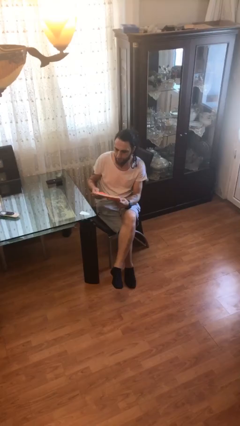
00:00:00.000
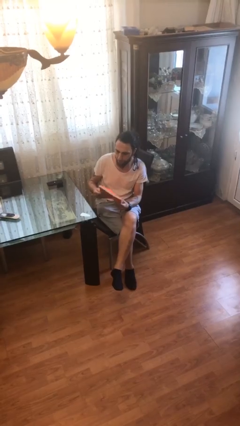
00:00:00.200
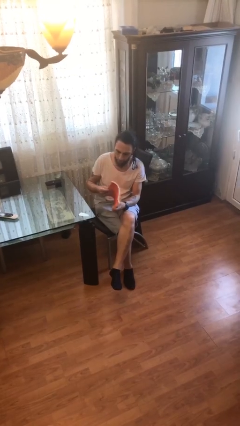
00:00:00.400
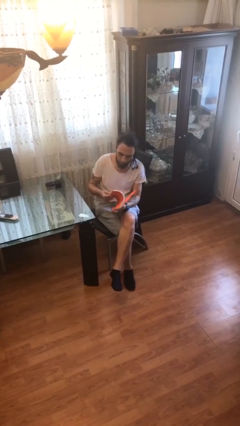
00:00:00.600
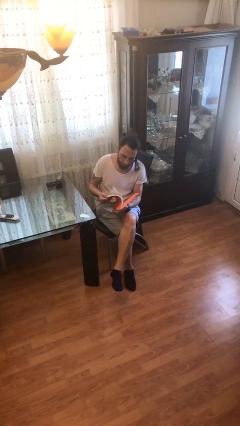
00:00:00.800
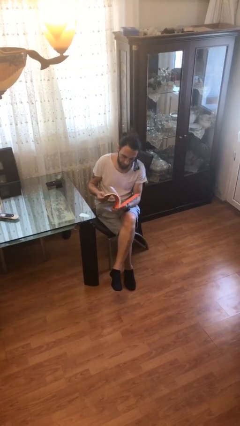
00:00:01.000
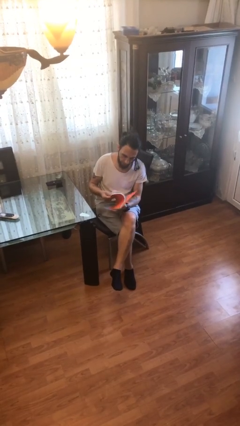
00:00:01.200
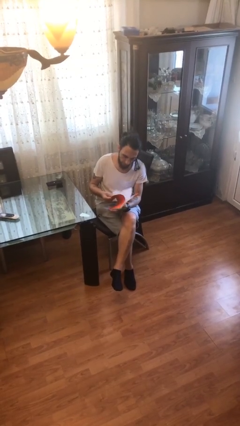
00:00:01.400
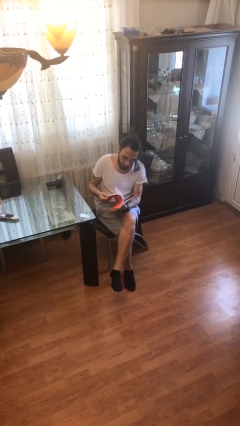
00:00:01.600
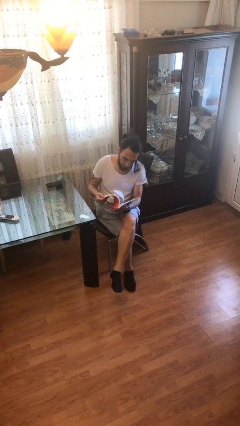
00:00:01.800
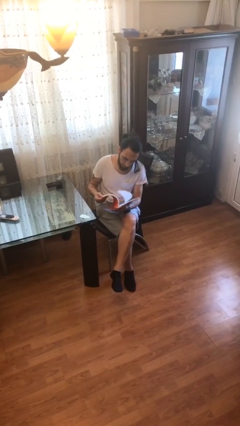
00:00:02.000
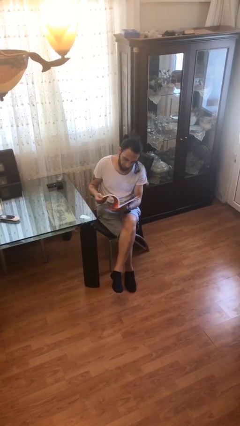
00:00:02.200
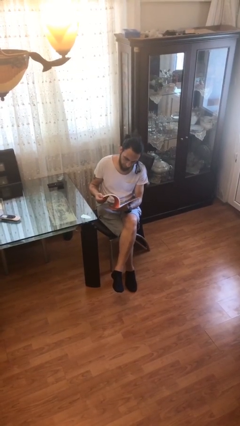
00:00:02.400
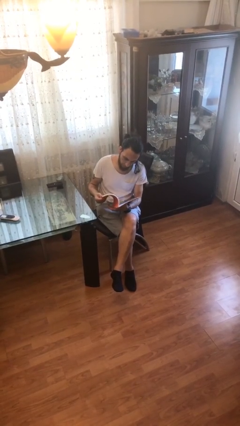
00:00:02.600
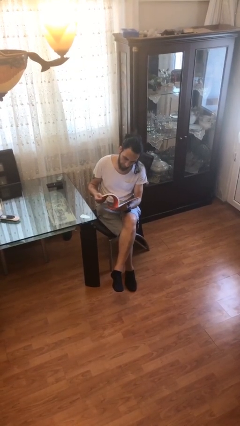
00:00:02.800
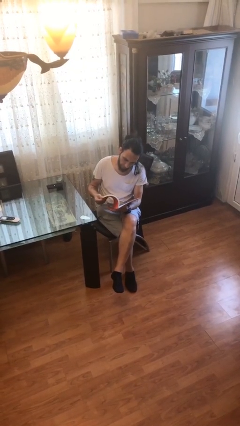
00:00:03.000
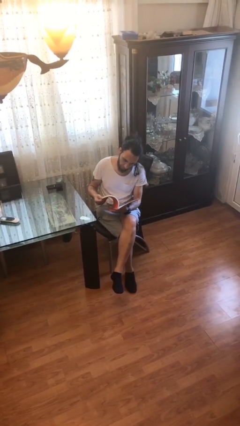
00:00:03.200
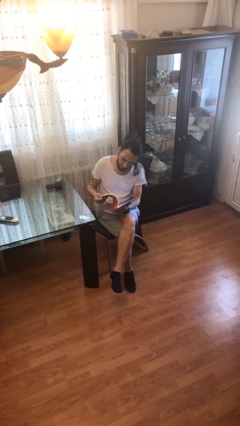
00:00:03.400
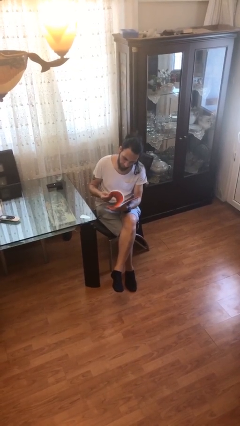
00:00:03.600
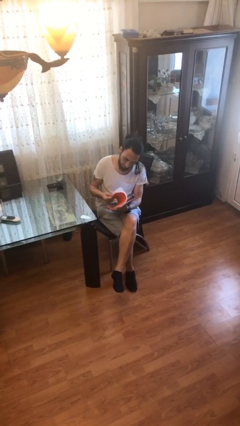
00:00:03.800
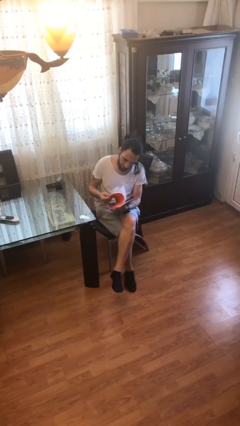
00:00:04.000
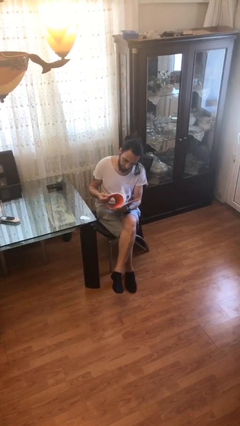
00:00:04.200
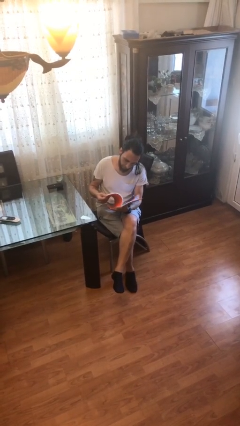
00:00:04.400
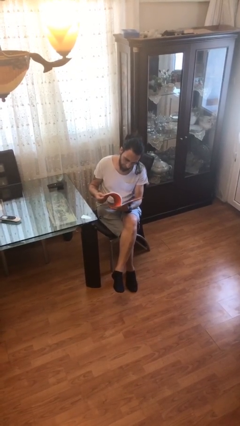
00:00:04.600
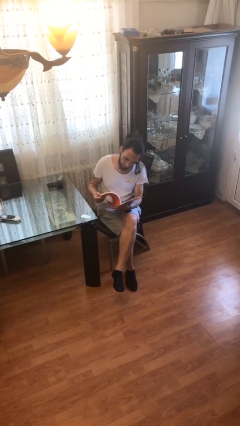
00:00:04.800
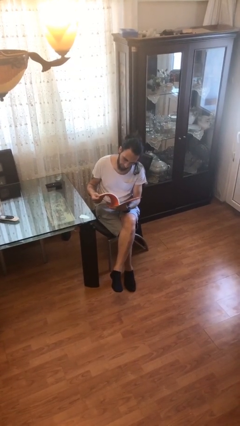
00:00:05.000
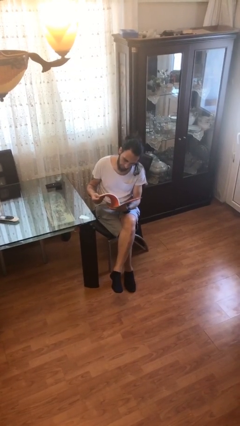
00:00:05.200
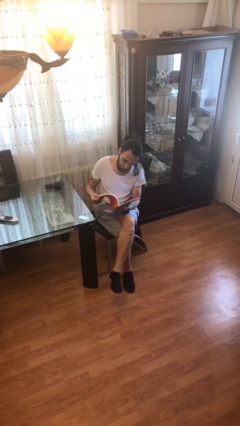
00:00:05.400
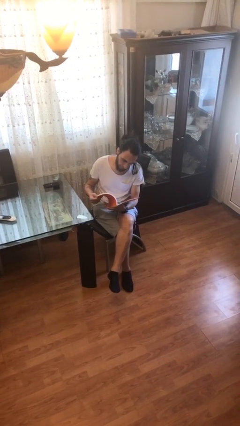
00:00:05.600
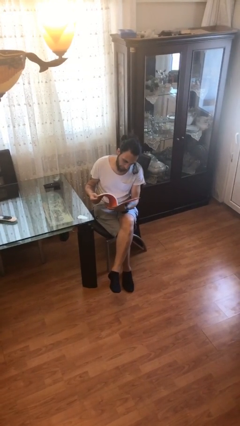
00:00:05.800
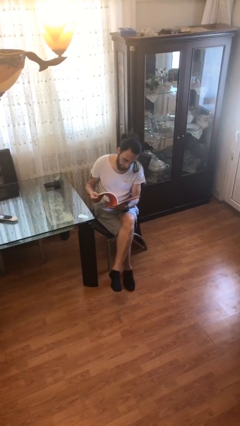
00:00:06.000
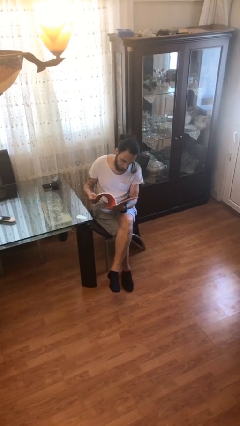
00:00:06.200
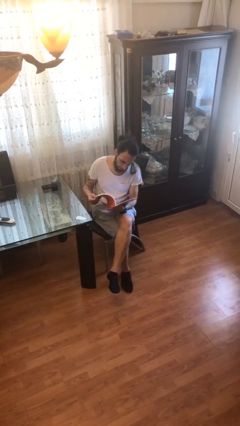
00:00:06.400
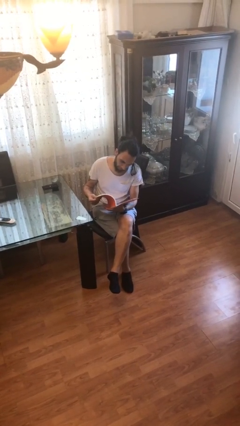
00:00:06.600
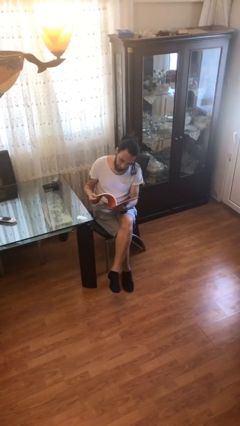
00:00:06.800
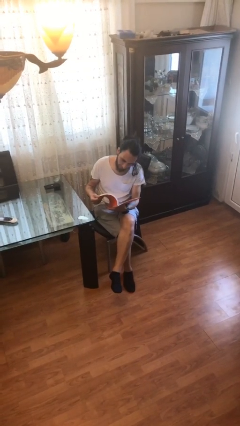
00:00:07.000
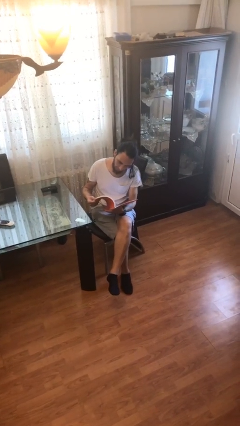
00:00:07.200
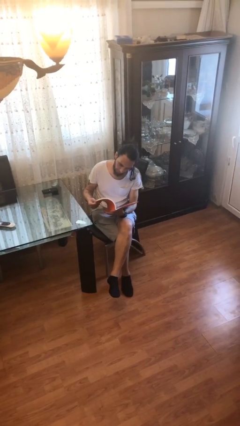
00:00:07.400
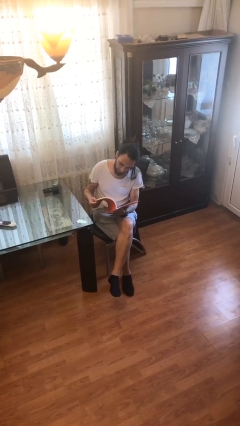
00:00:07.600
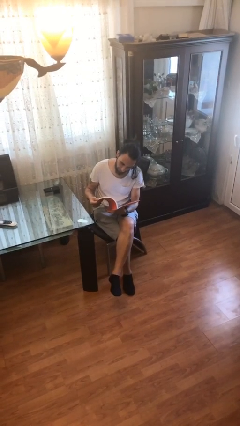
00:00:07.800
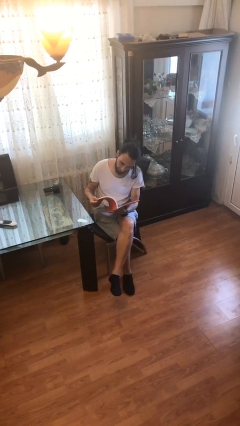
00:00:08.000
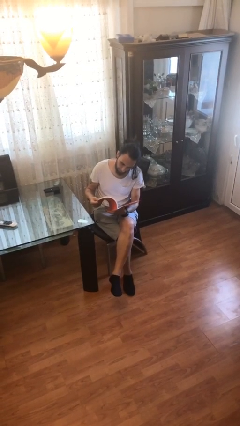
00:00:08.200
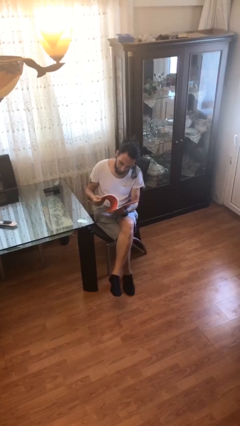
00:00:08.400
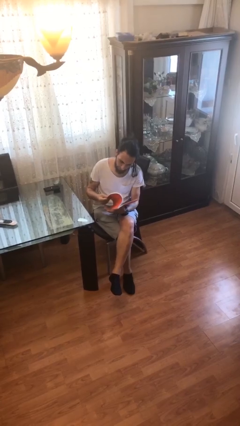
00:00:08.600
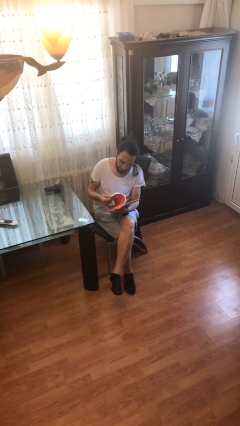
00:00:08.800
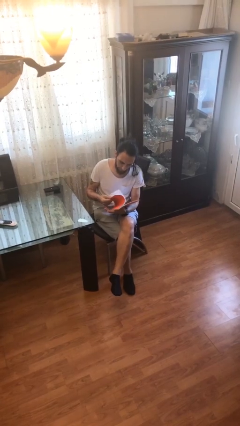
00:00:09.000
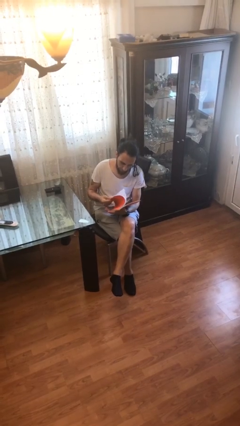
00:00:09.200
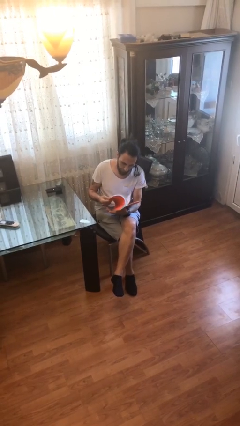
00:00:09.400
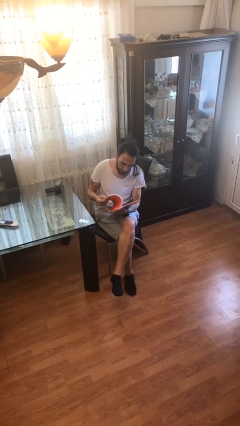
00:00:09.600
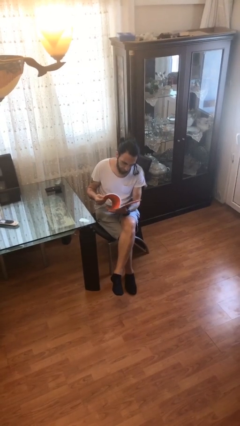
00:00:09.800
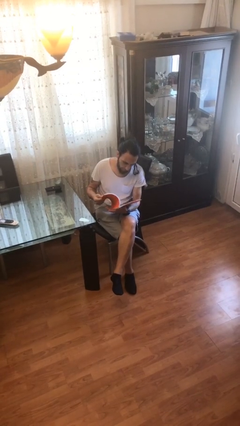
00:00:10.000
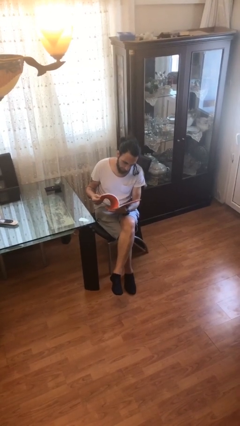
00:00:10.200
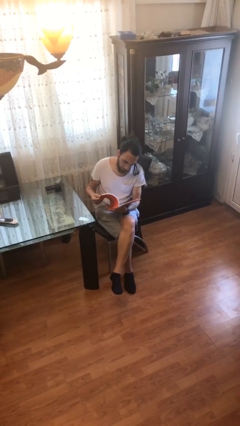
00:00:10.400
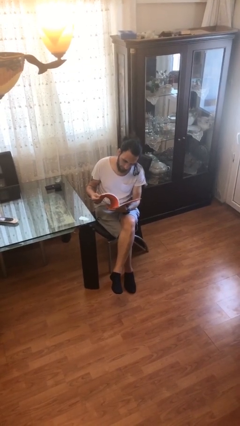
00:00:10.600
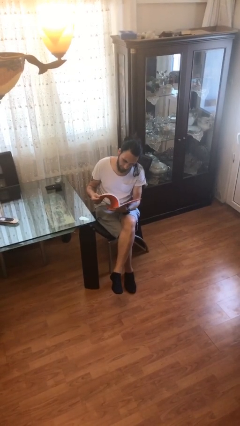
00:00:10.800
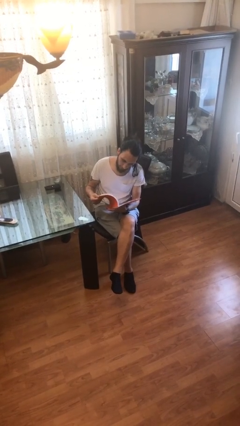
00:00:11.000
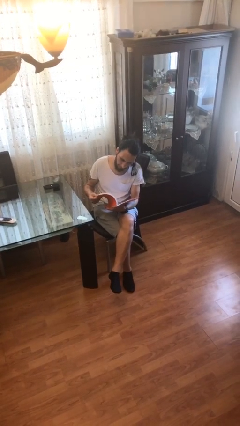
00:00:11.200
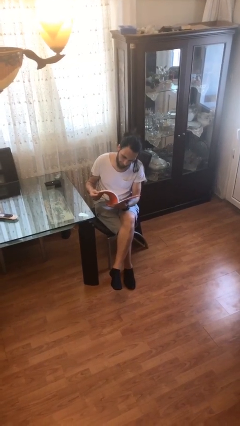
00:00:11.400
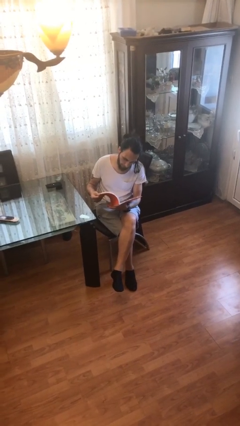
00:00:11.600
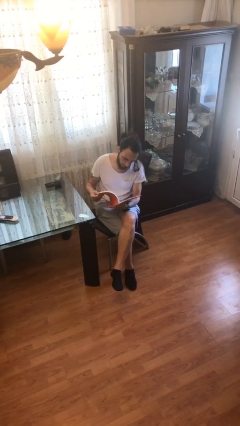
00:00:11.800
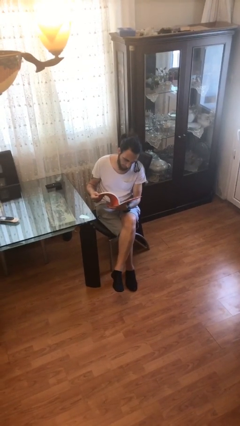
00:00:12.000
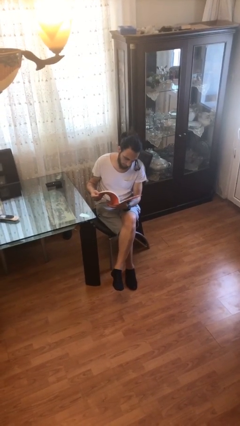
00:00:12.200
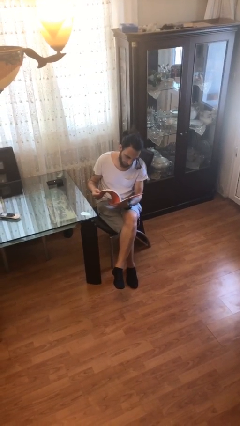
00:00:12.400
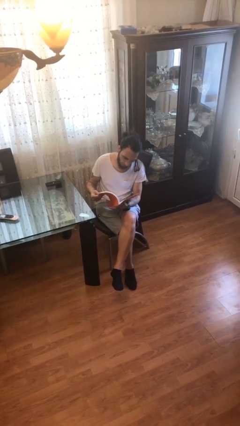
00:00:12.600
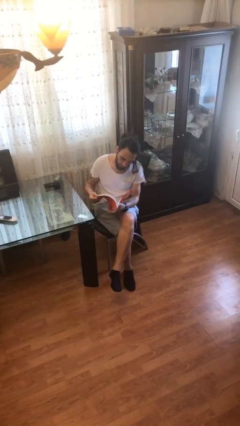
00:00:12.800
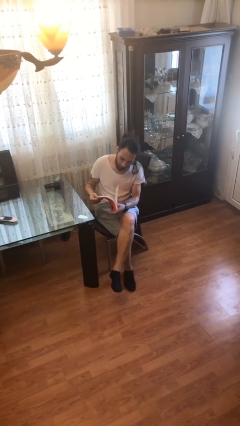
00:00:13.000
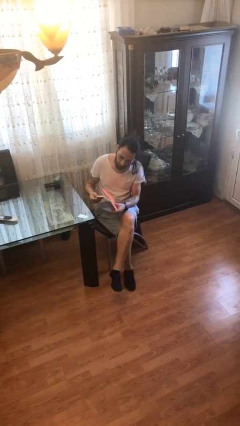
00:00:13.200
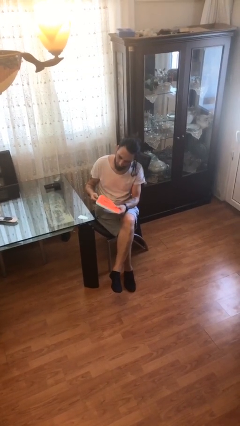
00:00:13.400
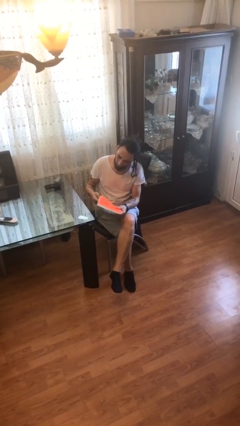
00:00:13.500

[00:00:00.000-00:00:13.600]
person reads document

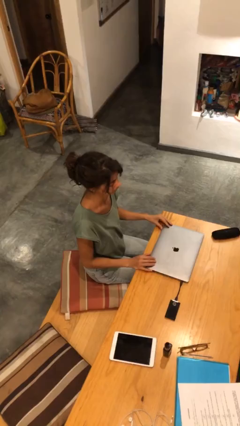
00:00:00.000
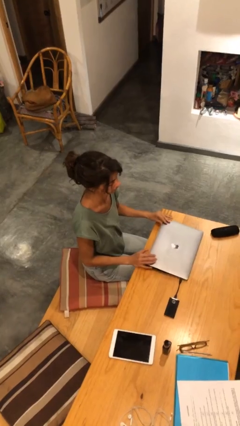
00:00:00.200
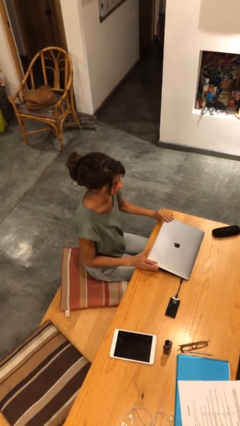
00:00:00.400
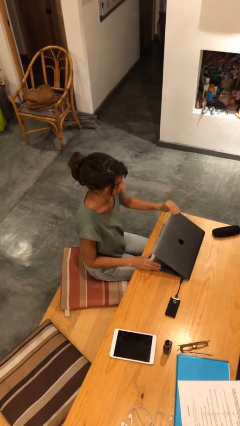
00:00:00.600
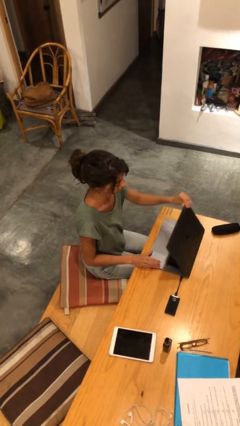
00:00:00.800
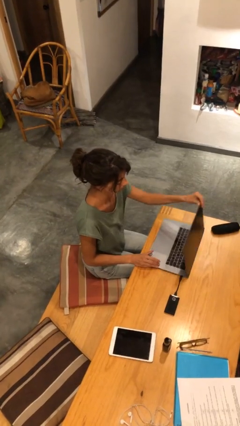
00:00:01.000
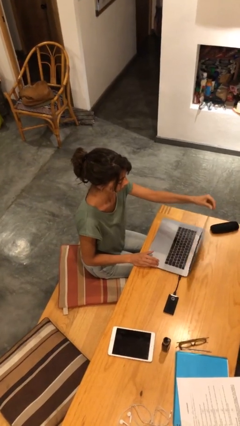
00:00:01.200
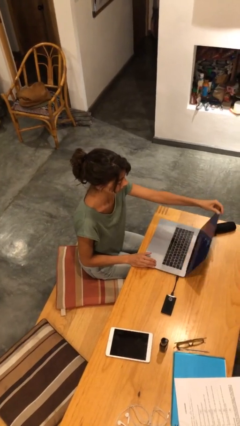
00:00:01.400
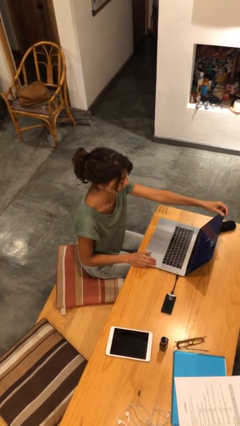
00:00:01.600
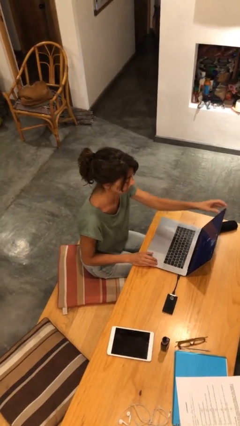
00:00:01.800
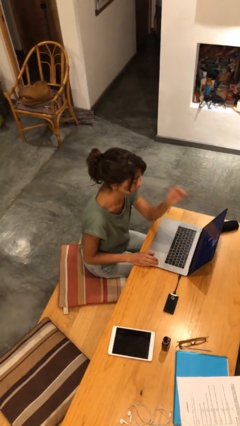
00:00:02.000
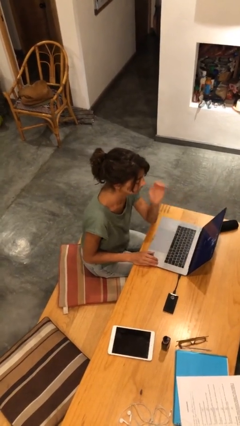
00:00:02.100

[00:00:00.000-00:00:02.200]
person opens laptop

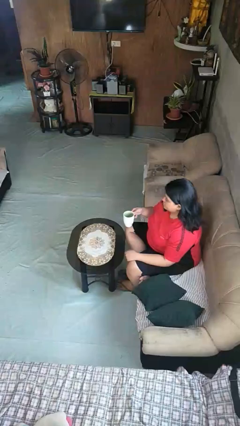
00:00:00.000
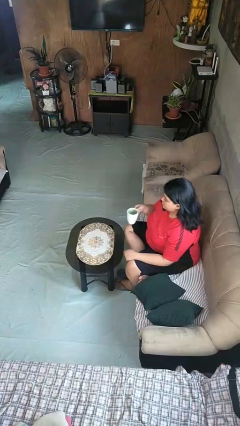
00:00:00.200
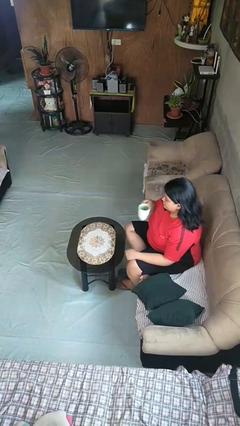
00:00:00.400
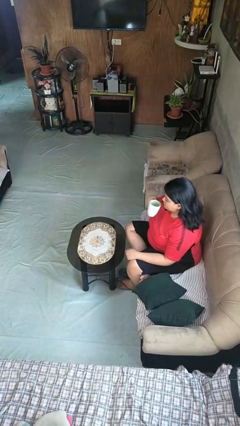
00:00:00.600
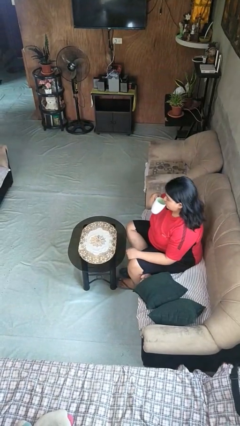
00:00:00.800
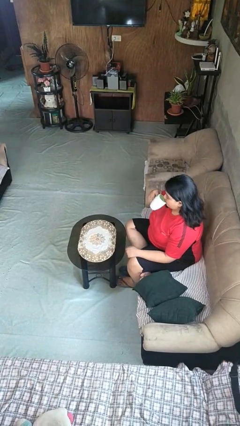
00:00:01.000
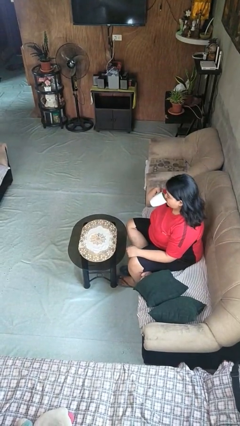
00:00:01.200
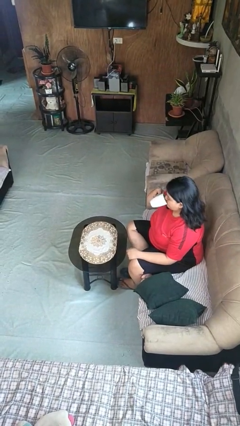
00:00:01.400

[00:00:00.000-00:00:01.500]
person drinks from mug
